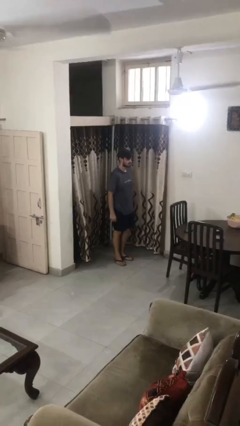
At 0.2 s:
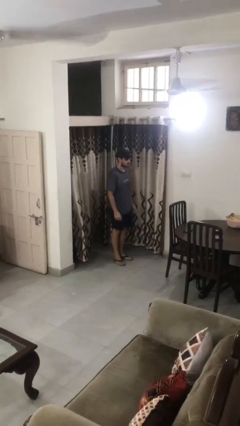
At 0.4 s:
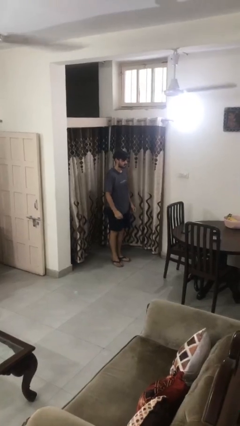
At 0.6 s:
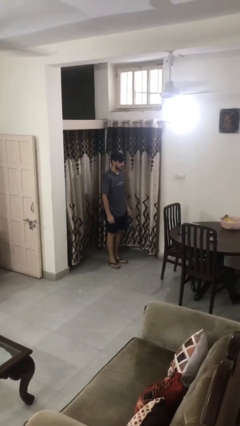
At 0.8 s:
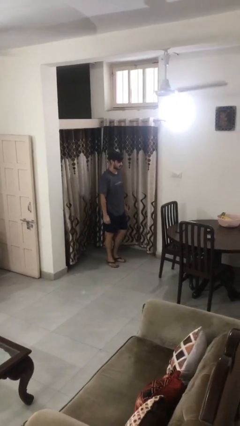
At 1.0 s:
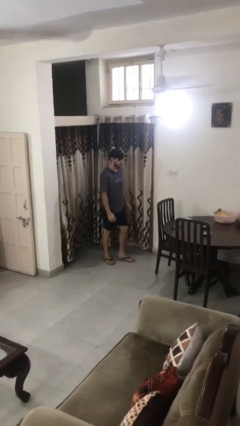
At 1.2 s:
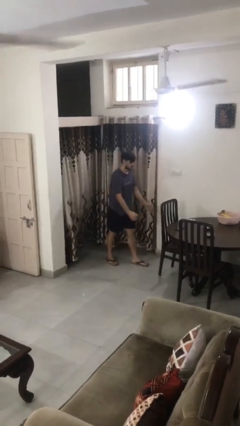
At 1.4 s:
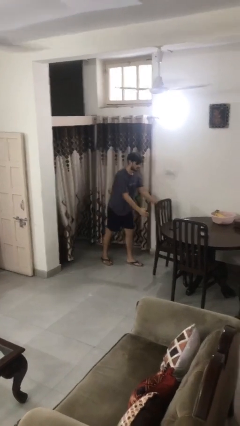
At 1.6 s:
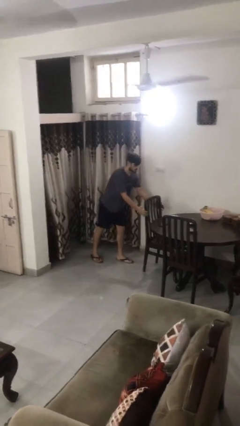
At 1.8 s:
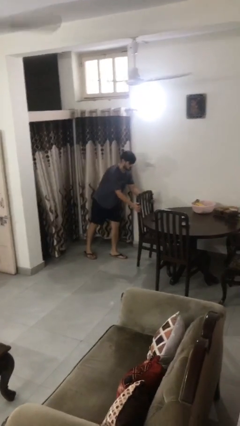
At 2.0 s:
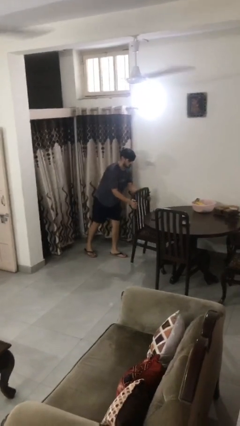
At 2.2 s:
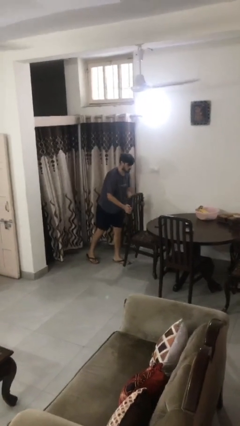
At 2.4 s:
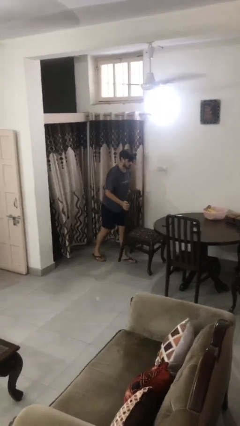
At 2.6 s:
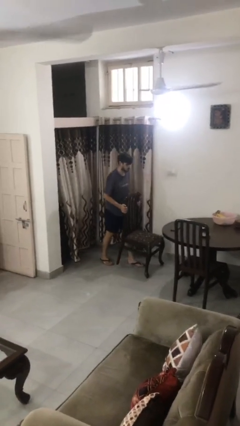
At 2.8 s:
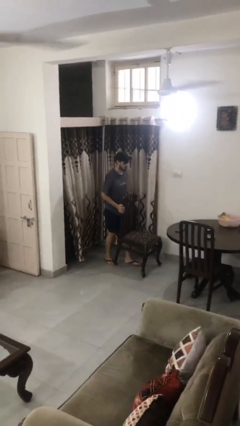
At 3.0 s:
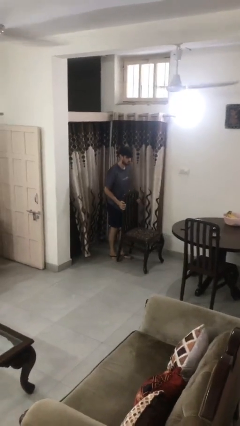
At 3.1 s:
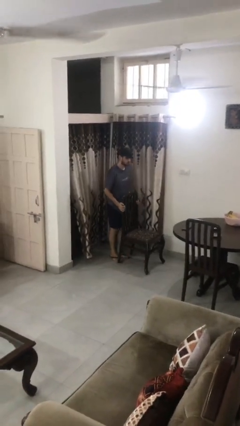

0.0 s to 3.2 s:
person pulls out chair

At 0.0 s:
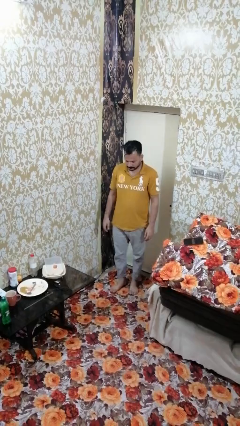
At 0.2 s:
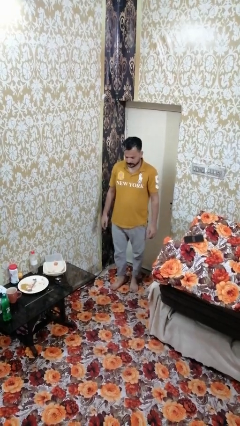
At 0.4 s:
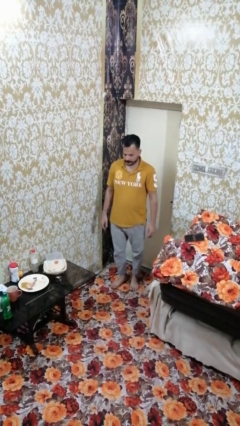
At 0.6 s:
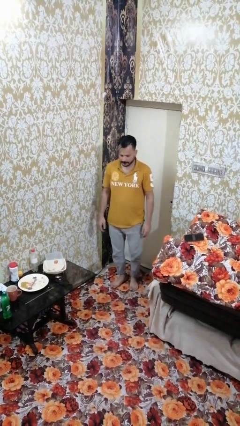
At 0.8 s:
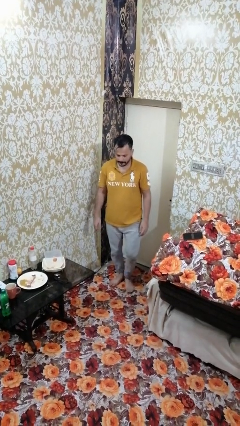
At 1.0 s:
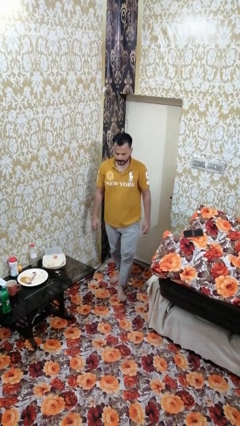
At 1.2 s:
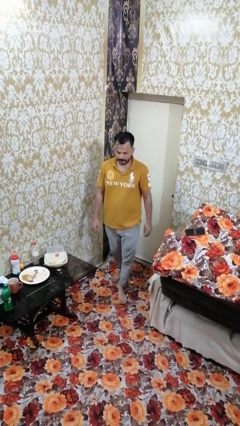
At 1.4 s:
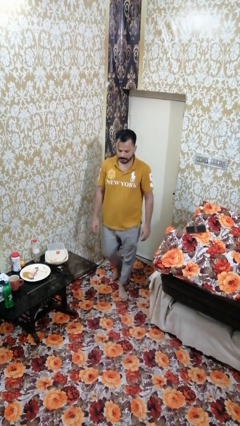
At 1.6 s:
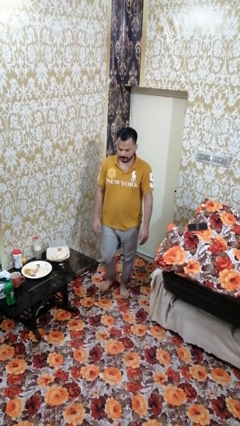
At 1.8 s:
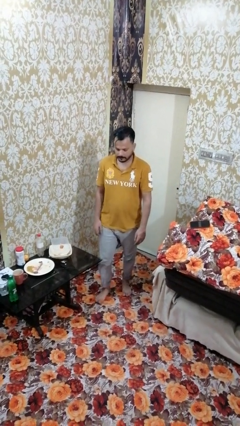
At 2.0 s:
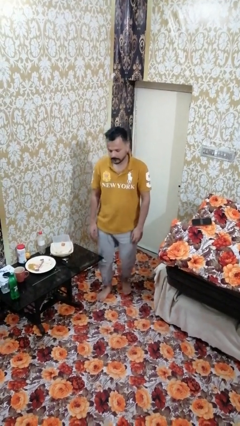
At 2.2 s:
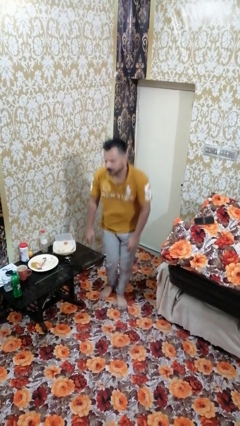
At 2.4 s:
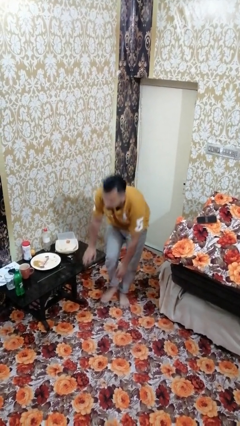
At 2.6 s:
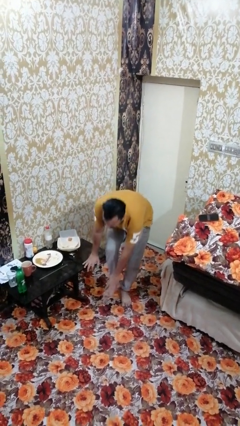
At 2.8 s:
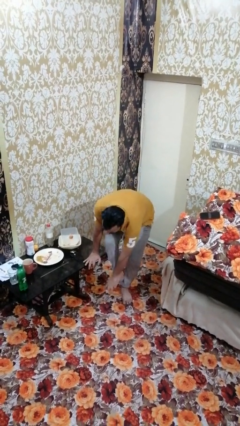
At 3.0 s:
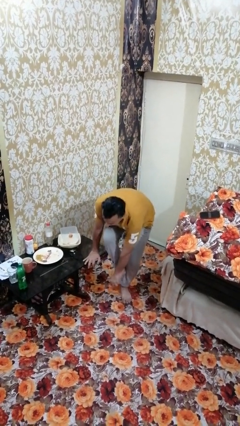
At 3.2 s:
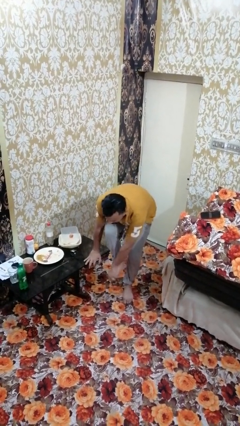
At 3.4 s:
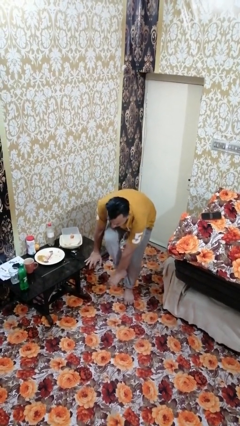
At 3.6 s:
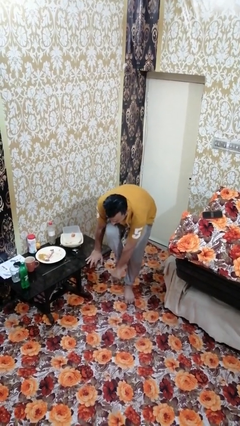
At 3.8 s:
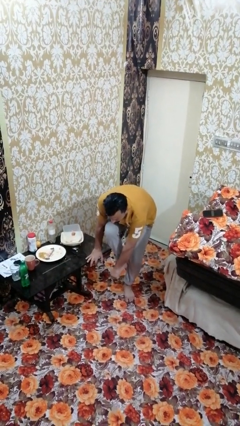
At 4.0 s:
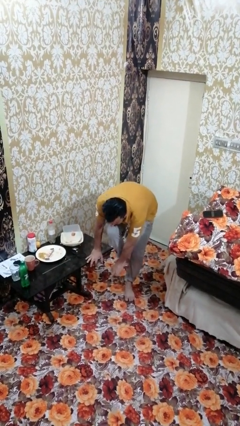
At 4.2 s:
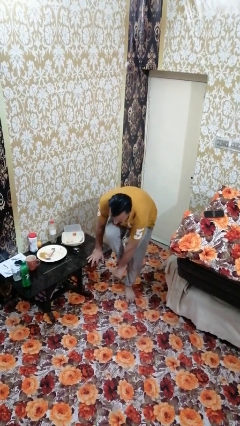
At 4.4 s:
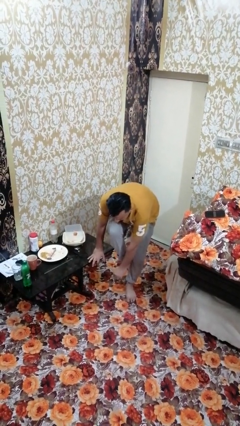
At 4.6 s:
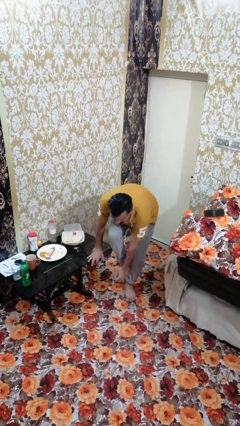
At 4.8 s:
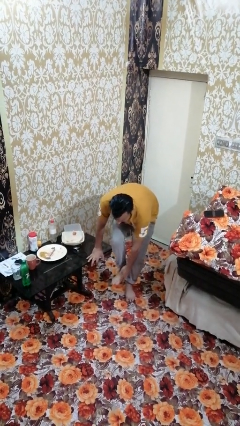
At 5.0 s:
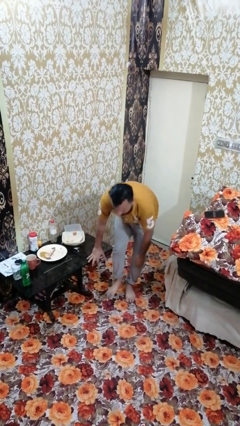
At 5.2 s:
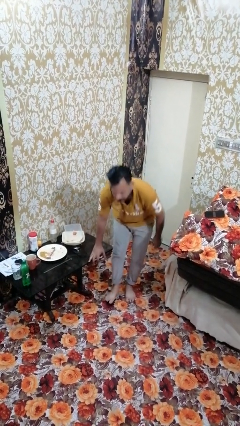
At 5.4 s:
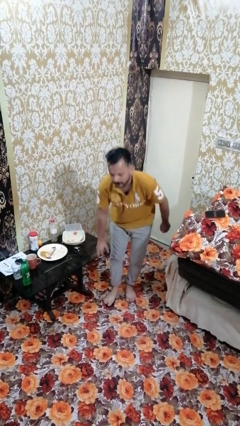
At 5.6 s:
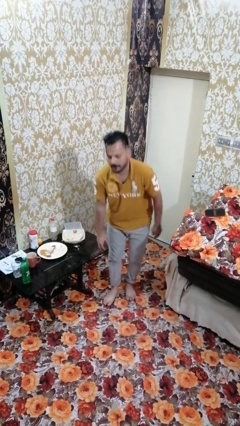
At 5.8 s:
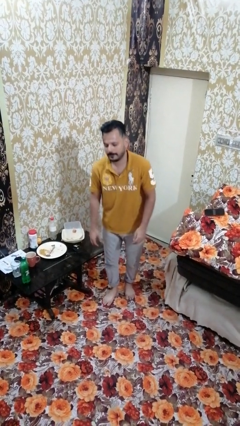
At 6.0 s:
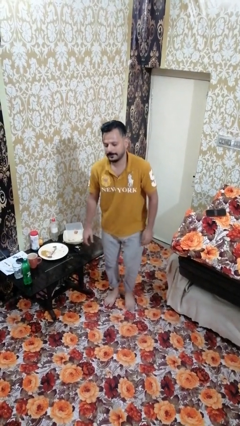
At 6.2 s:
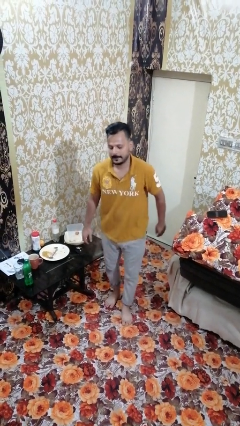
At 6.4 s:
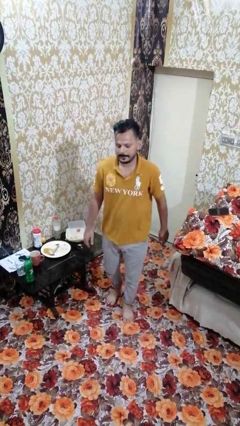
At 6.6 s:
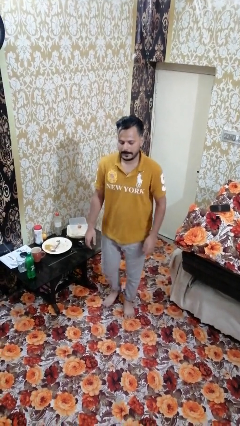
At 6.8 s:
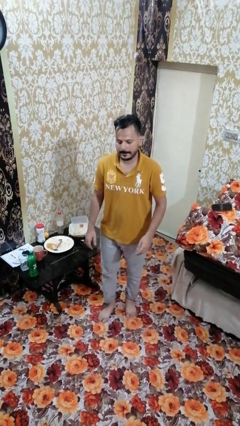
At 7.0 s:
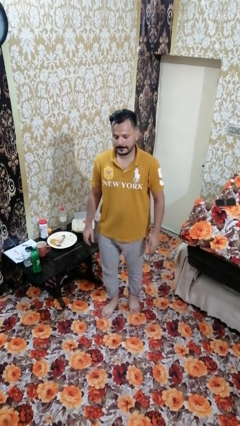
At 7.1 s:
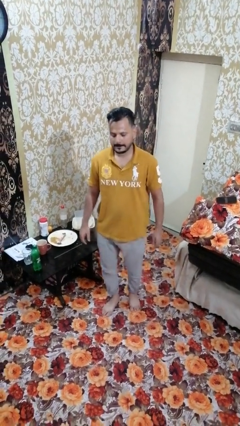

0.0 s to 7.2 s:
person bumps into table

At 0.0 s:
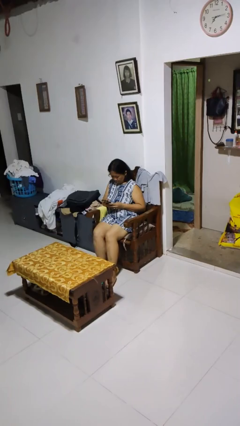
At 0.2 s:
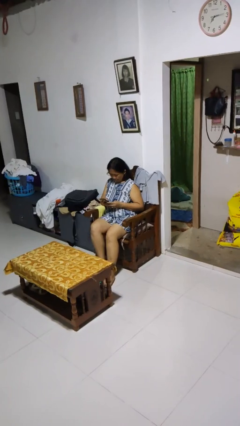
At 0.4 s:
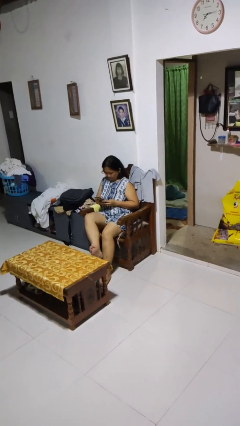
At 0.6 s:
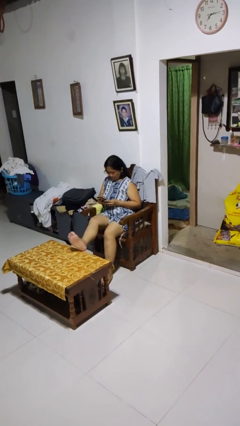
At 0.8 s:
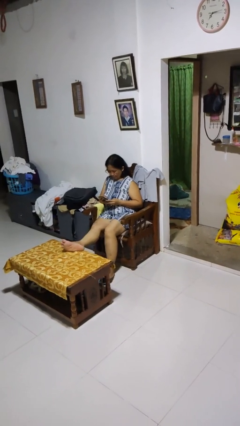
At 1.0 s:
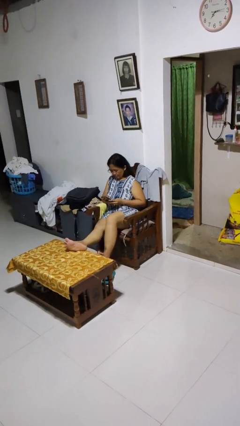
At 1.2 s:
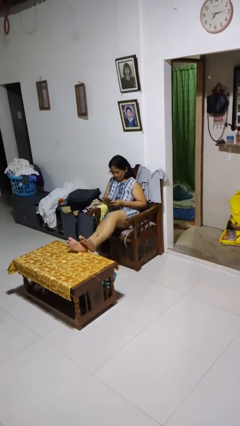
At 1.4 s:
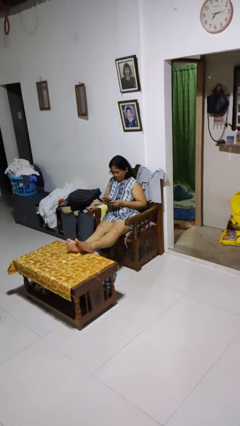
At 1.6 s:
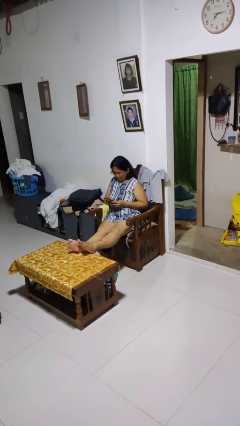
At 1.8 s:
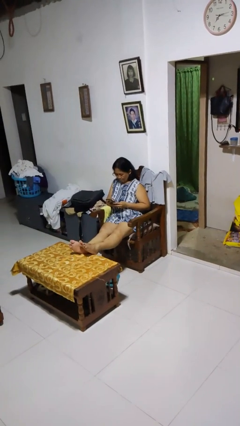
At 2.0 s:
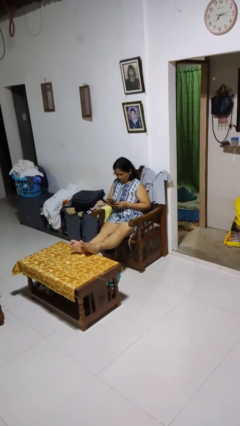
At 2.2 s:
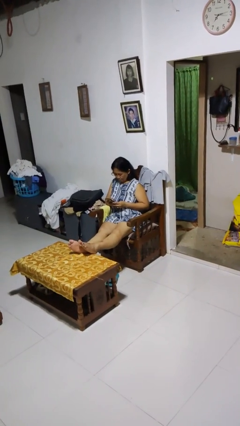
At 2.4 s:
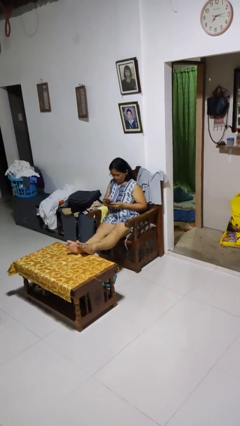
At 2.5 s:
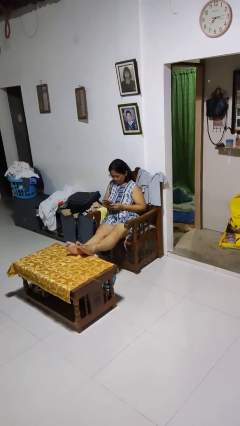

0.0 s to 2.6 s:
person puts feet up

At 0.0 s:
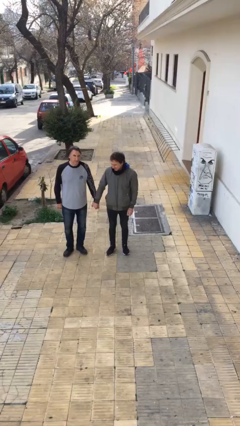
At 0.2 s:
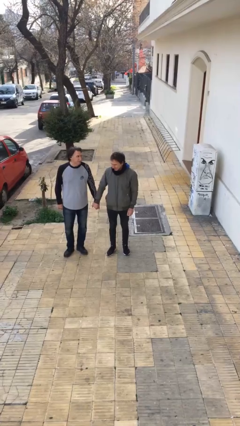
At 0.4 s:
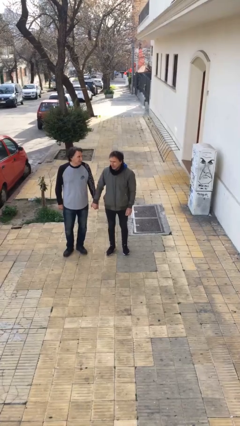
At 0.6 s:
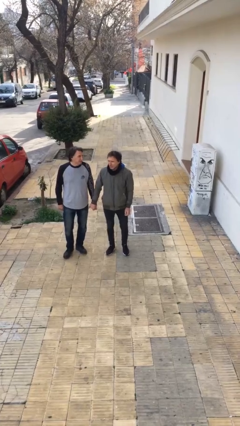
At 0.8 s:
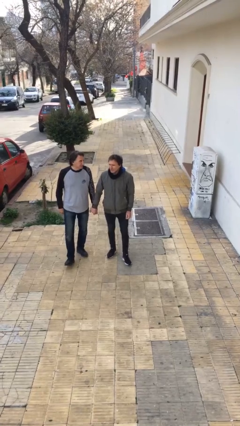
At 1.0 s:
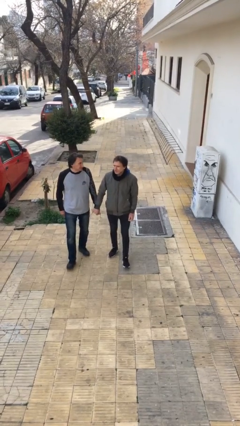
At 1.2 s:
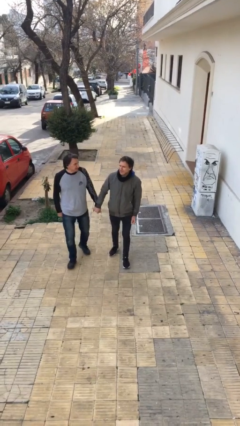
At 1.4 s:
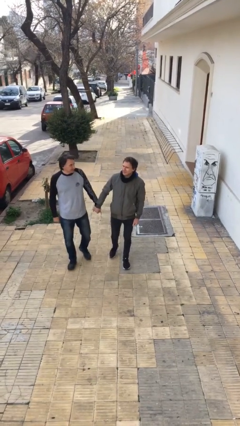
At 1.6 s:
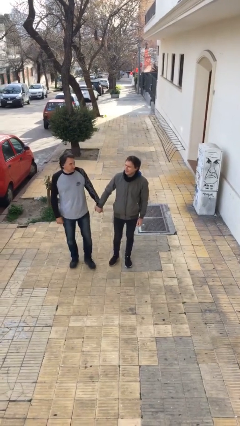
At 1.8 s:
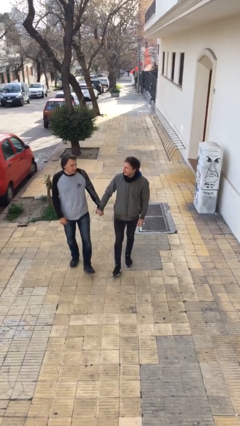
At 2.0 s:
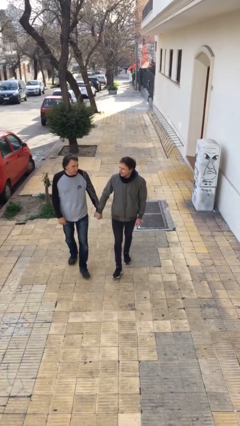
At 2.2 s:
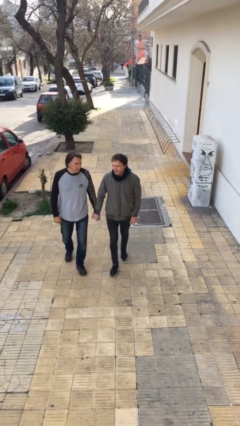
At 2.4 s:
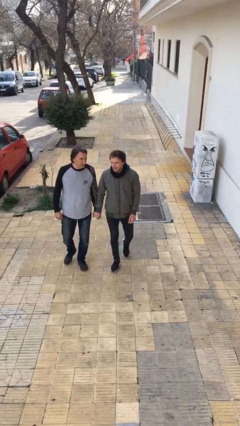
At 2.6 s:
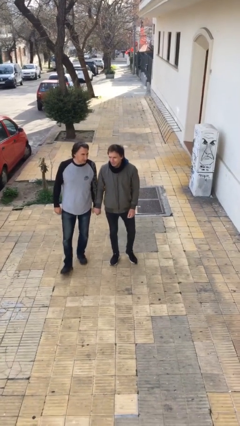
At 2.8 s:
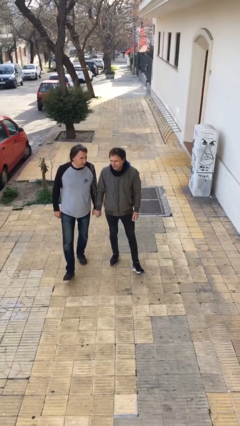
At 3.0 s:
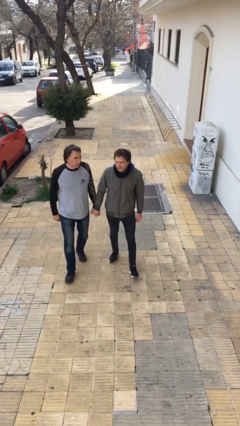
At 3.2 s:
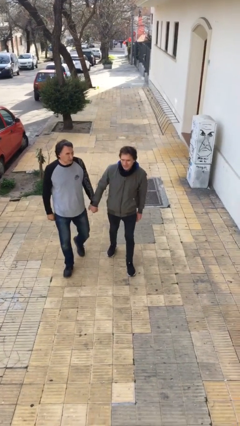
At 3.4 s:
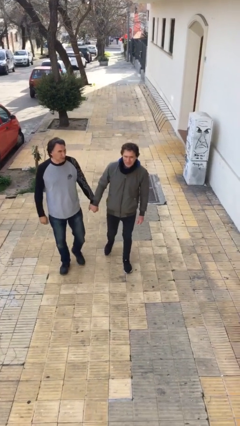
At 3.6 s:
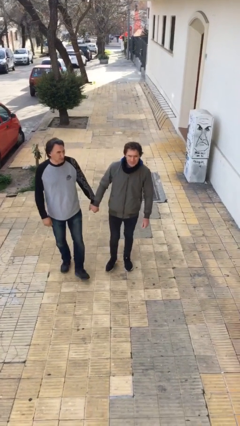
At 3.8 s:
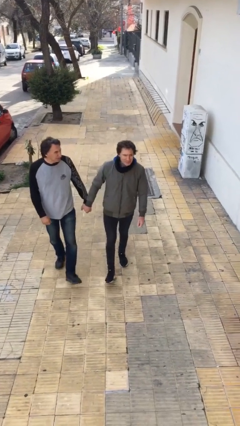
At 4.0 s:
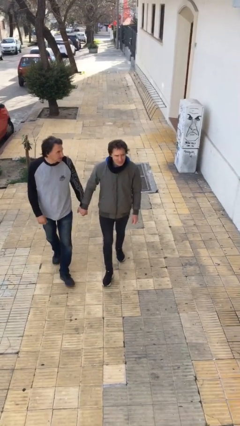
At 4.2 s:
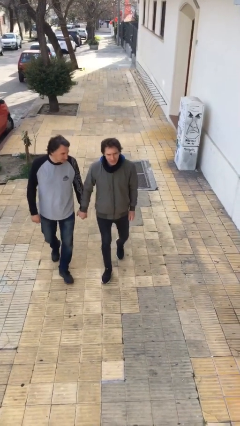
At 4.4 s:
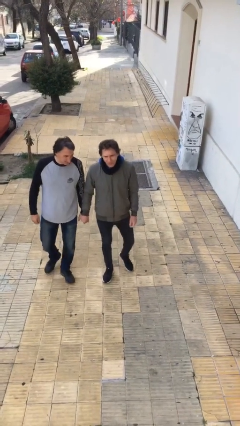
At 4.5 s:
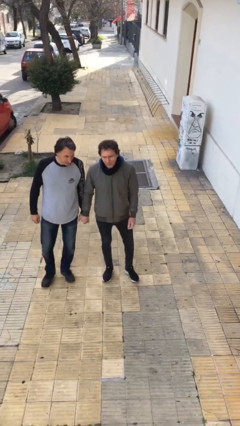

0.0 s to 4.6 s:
person holds hand

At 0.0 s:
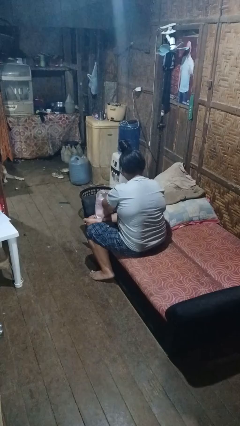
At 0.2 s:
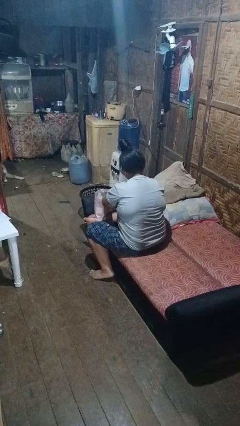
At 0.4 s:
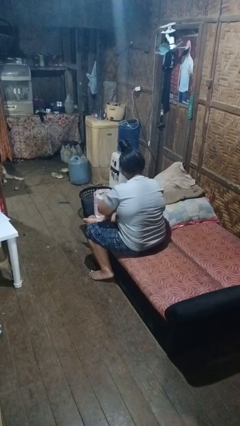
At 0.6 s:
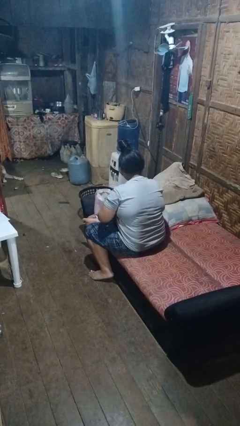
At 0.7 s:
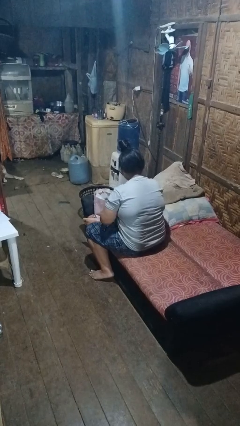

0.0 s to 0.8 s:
person puts object into bag
